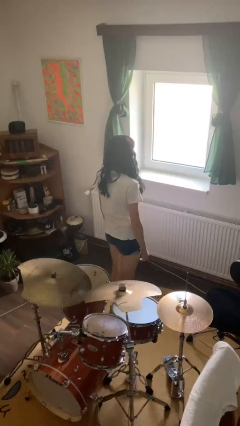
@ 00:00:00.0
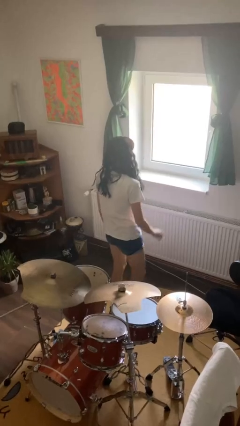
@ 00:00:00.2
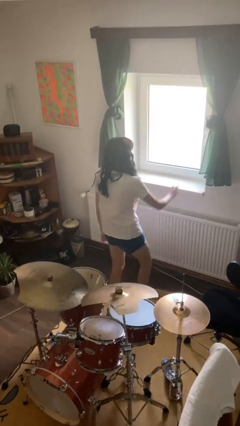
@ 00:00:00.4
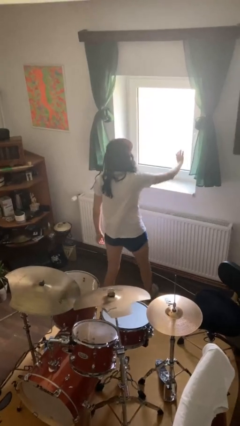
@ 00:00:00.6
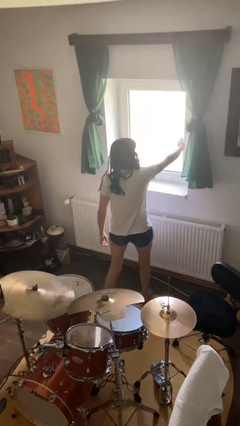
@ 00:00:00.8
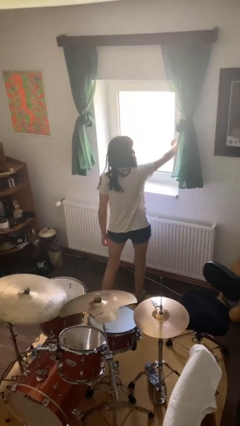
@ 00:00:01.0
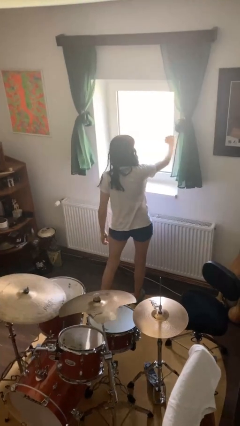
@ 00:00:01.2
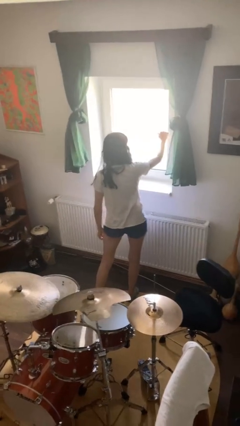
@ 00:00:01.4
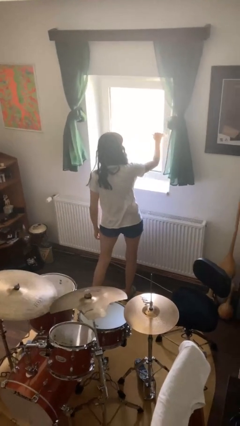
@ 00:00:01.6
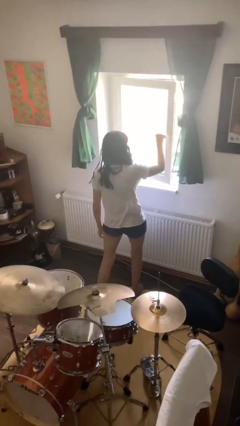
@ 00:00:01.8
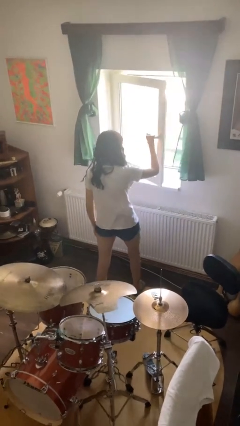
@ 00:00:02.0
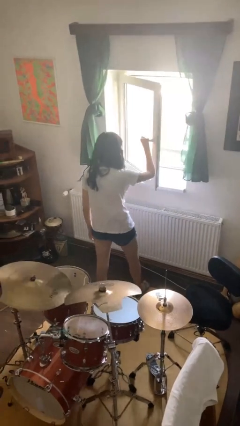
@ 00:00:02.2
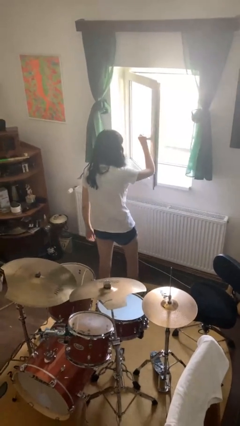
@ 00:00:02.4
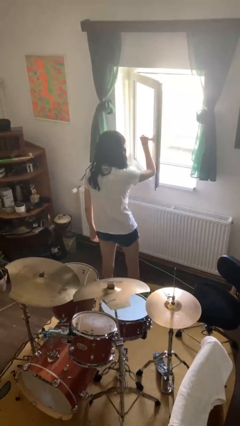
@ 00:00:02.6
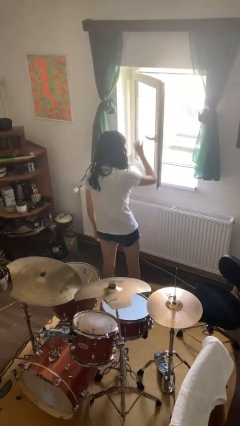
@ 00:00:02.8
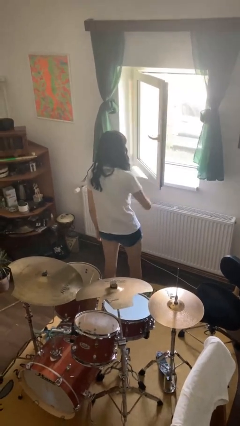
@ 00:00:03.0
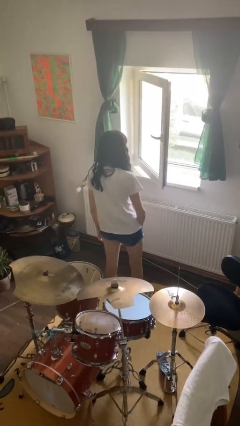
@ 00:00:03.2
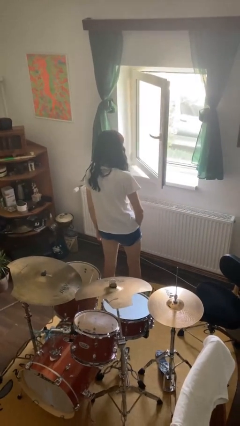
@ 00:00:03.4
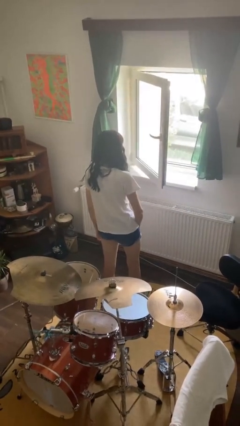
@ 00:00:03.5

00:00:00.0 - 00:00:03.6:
person opens home window

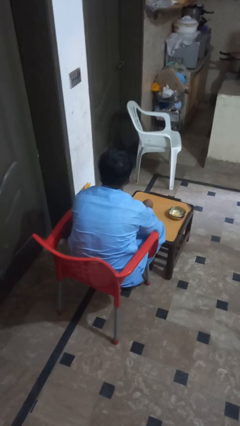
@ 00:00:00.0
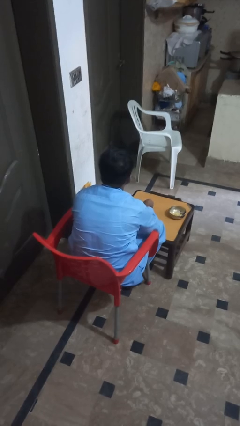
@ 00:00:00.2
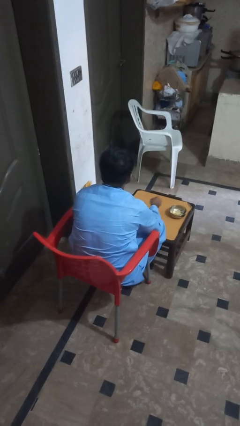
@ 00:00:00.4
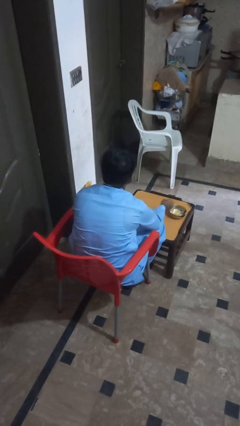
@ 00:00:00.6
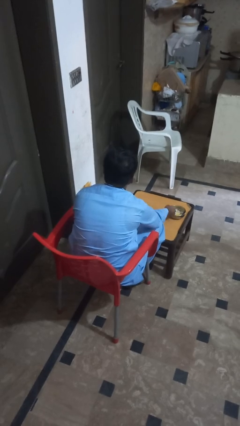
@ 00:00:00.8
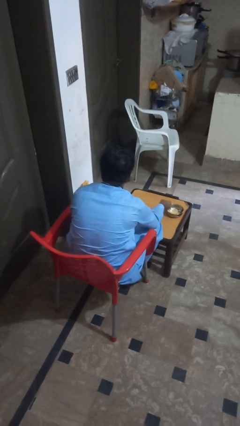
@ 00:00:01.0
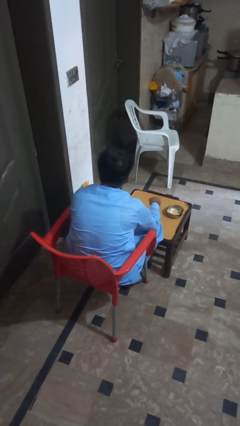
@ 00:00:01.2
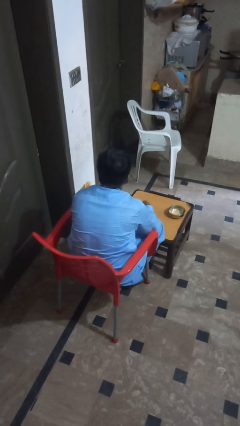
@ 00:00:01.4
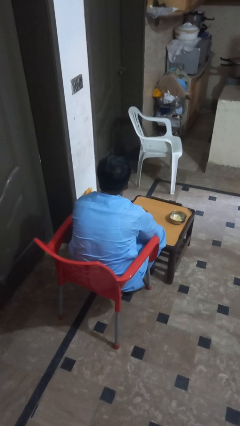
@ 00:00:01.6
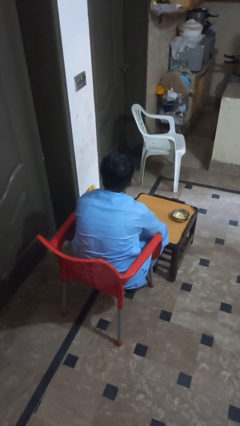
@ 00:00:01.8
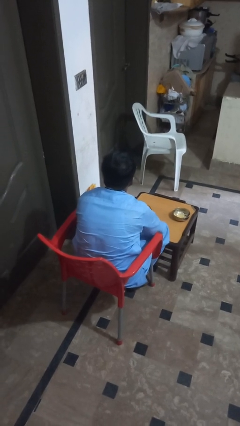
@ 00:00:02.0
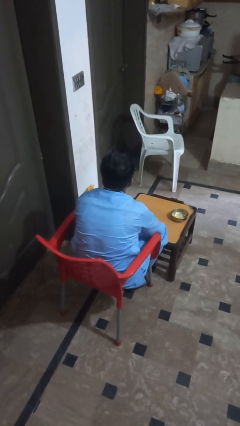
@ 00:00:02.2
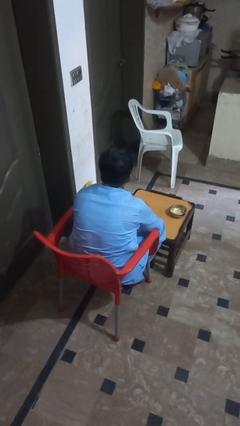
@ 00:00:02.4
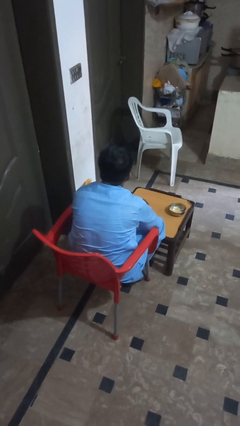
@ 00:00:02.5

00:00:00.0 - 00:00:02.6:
person pours into bowl

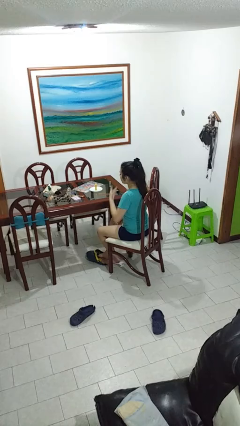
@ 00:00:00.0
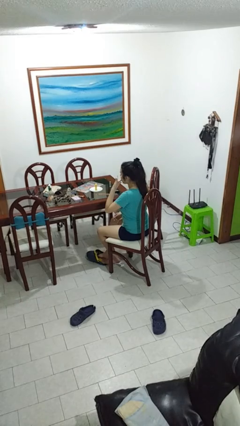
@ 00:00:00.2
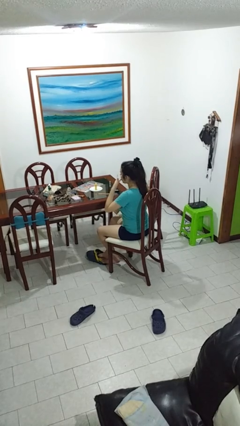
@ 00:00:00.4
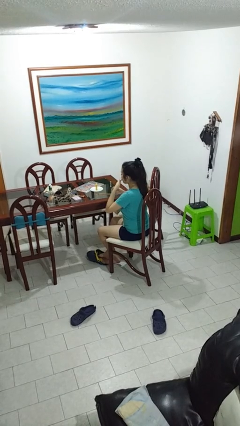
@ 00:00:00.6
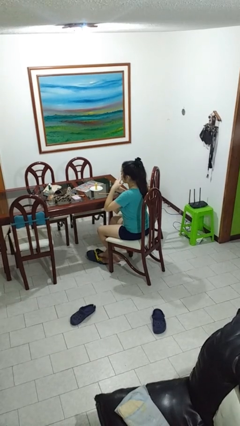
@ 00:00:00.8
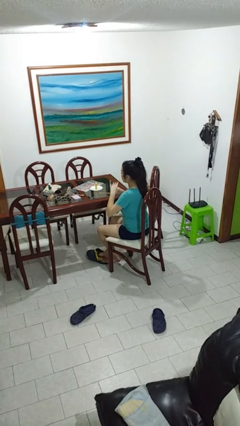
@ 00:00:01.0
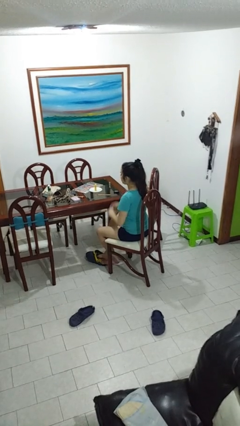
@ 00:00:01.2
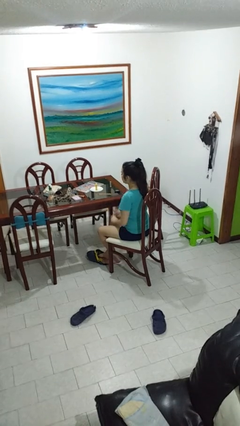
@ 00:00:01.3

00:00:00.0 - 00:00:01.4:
person licks fingers

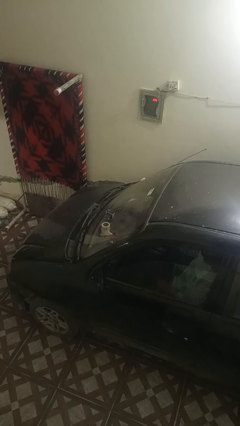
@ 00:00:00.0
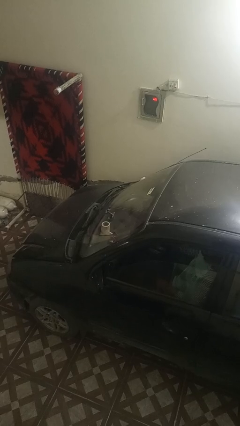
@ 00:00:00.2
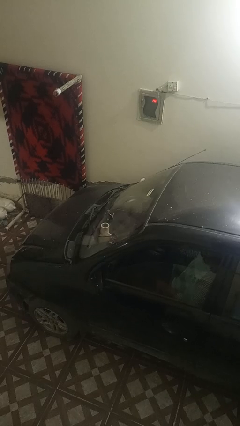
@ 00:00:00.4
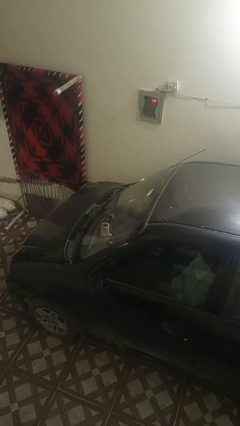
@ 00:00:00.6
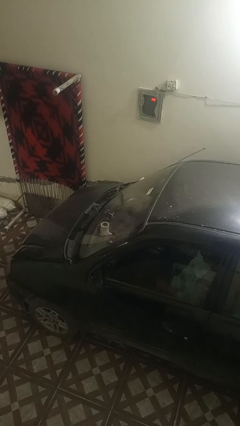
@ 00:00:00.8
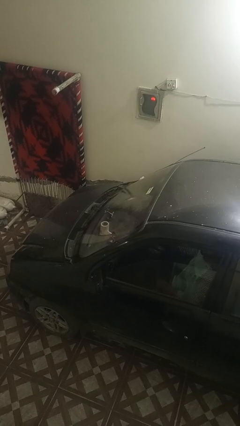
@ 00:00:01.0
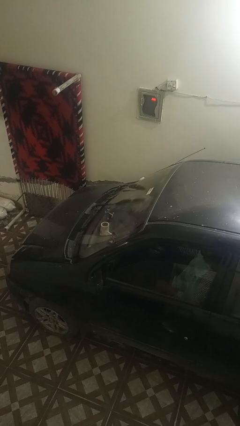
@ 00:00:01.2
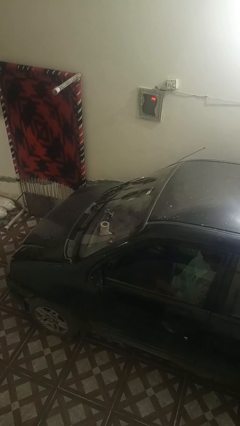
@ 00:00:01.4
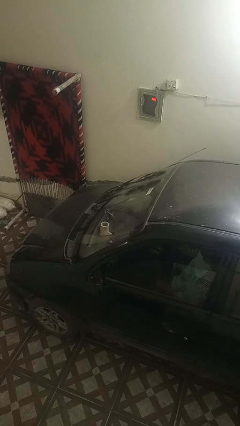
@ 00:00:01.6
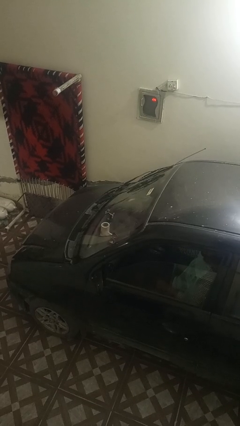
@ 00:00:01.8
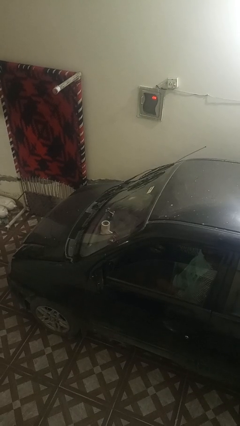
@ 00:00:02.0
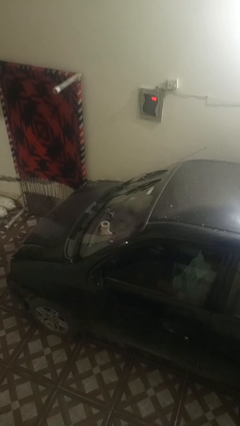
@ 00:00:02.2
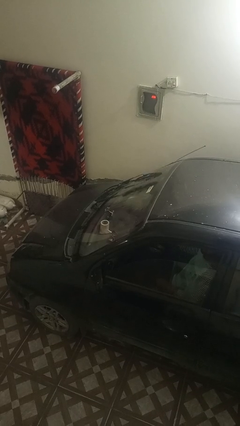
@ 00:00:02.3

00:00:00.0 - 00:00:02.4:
person flips up car wipers

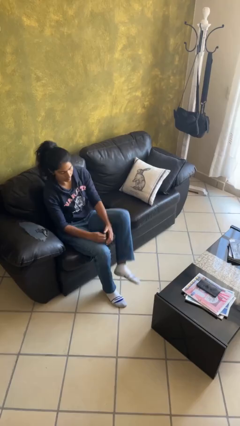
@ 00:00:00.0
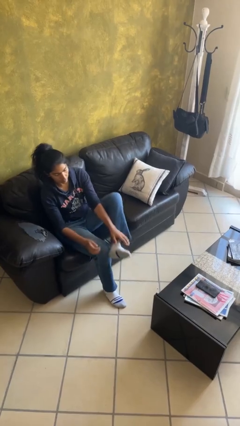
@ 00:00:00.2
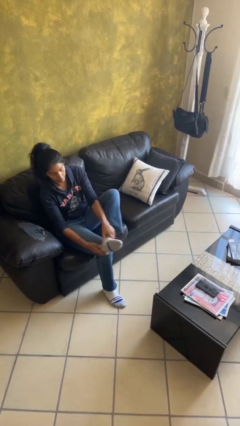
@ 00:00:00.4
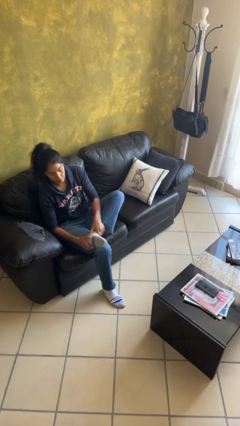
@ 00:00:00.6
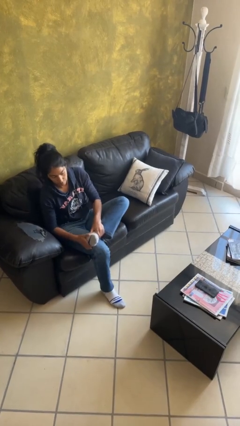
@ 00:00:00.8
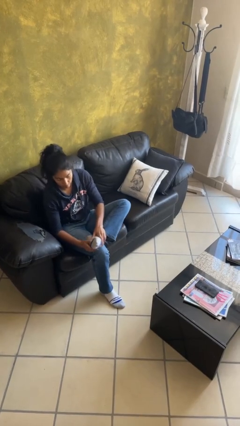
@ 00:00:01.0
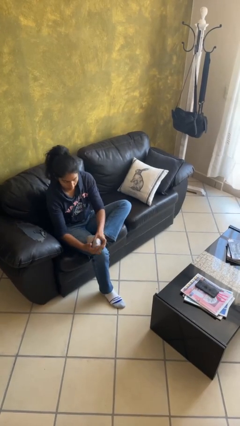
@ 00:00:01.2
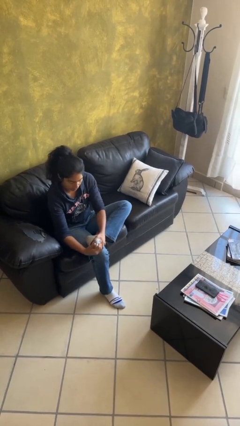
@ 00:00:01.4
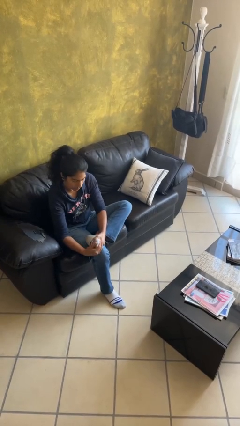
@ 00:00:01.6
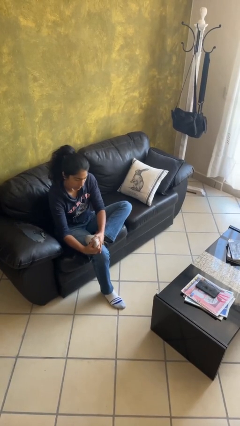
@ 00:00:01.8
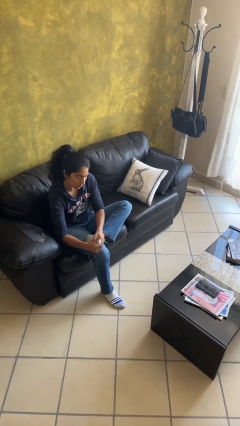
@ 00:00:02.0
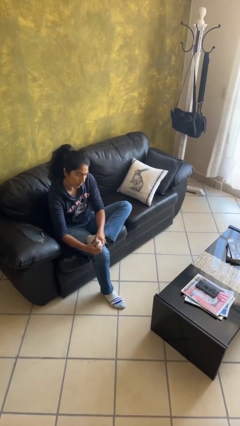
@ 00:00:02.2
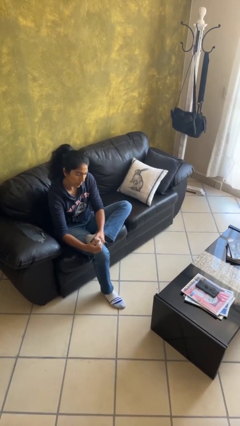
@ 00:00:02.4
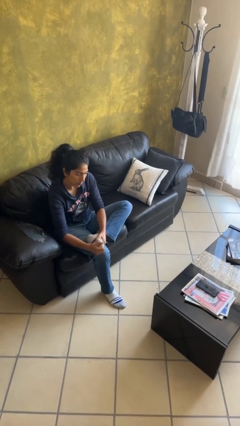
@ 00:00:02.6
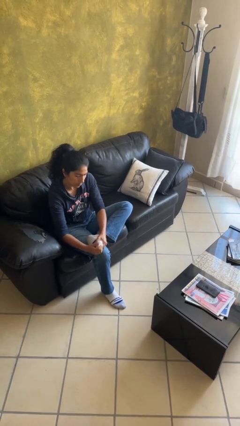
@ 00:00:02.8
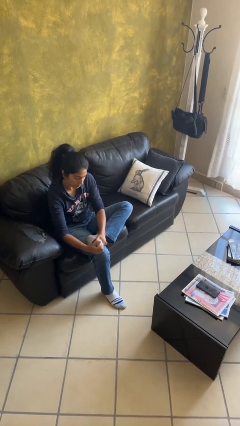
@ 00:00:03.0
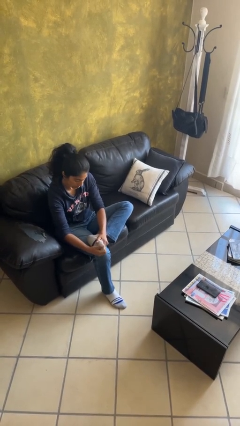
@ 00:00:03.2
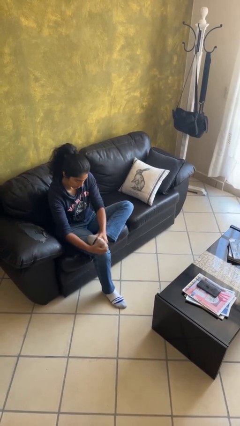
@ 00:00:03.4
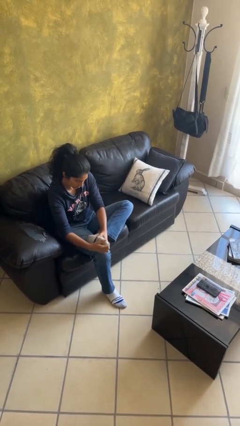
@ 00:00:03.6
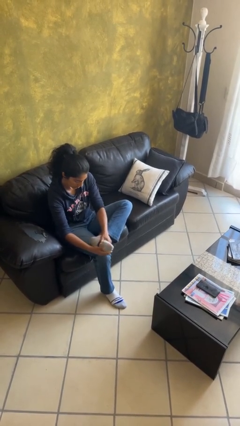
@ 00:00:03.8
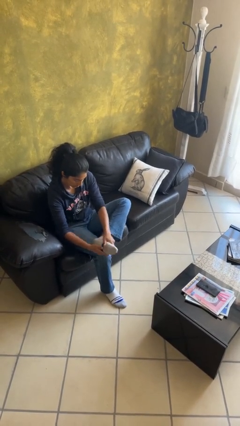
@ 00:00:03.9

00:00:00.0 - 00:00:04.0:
person rubs foot

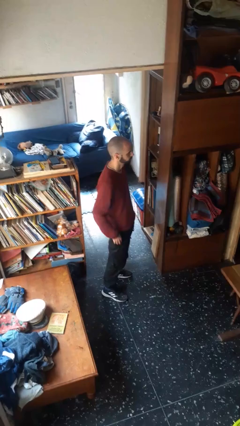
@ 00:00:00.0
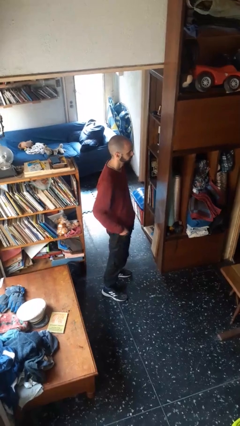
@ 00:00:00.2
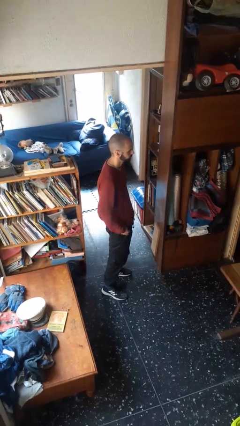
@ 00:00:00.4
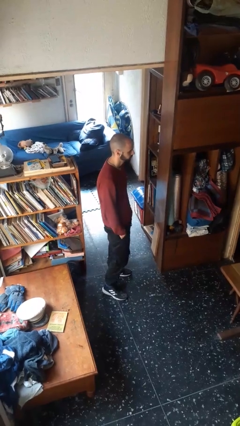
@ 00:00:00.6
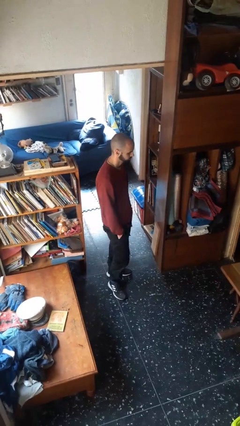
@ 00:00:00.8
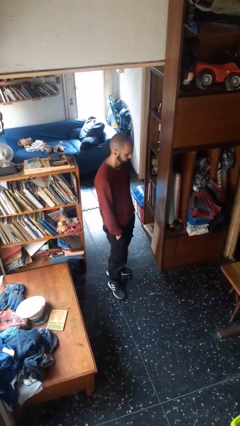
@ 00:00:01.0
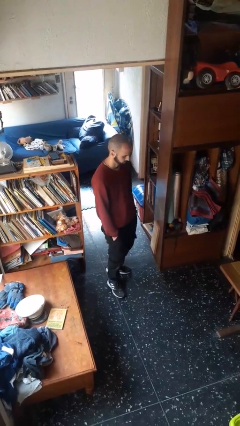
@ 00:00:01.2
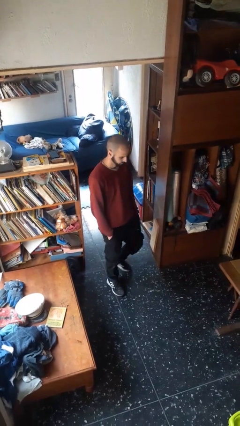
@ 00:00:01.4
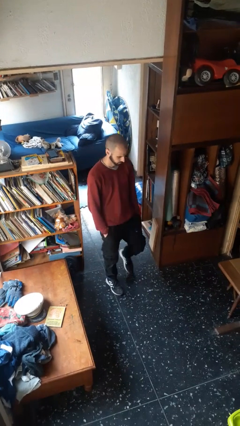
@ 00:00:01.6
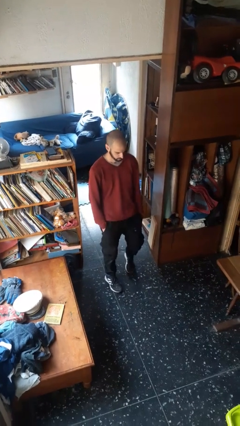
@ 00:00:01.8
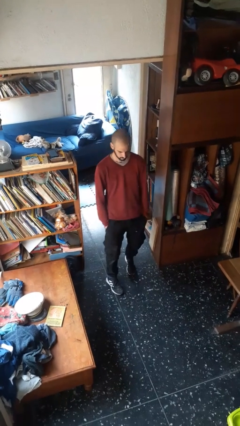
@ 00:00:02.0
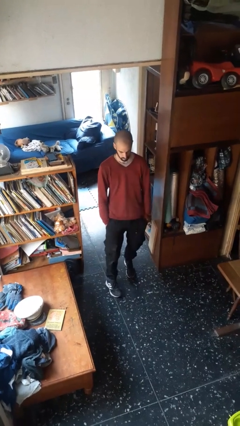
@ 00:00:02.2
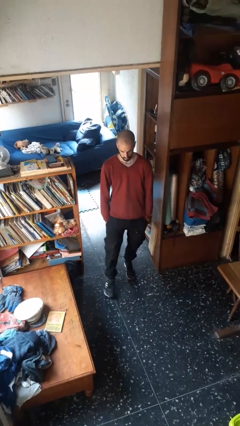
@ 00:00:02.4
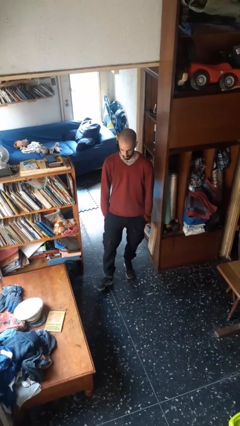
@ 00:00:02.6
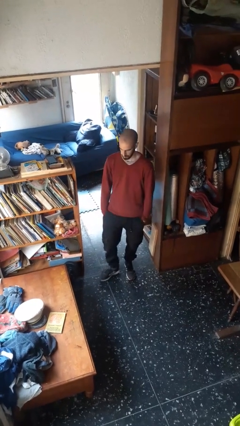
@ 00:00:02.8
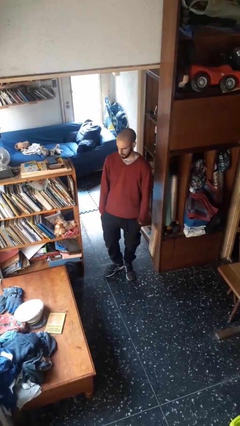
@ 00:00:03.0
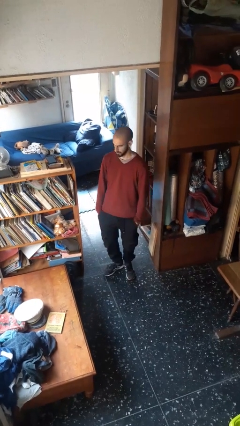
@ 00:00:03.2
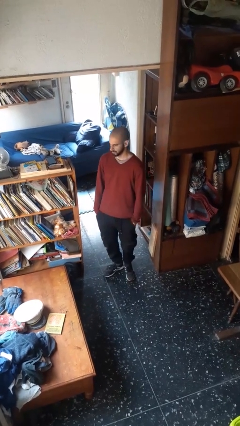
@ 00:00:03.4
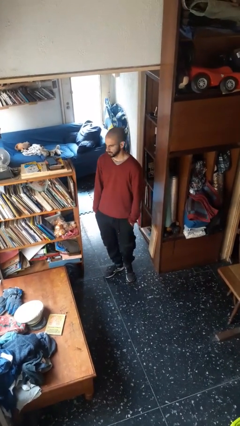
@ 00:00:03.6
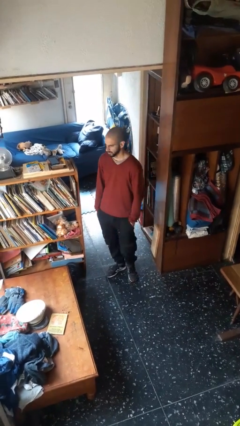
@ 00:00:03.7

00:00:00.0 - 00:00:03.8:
person puts hands in back pockets
